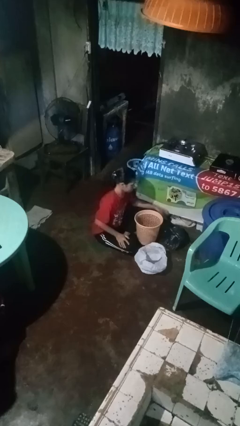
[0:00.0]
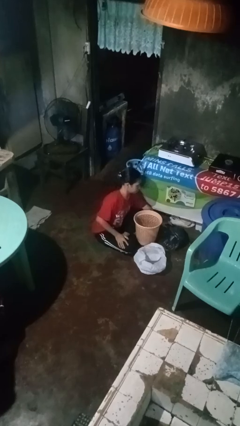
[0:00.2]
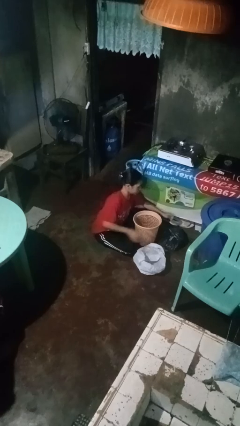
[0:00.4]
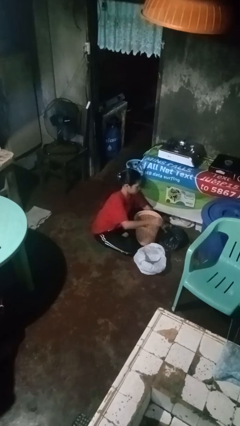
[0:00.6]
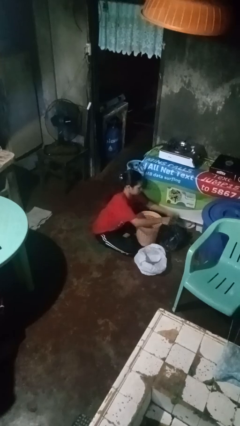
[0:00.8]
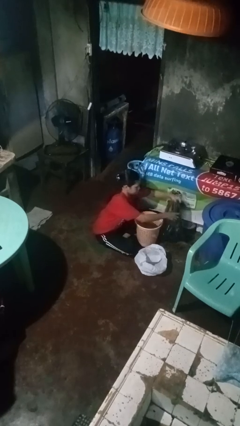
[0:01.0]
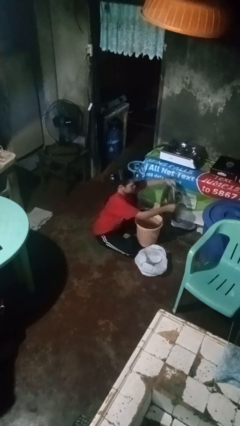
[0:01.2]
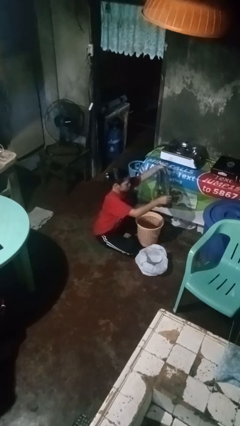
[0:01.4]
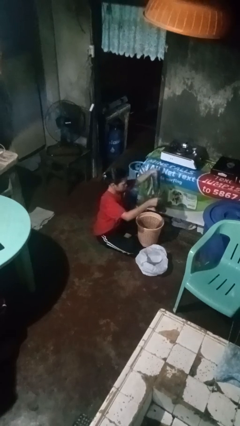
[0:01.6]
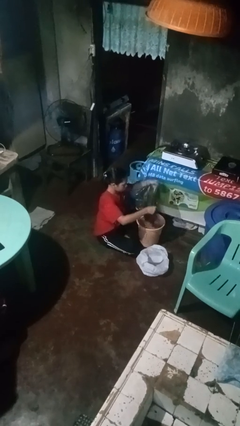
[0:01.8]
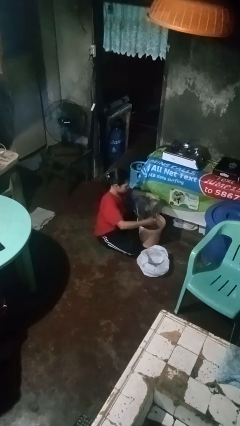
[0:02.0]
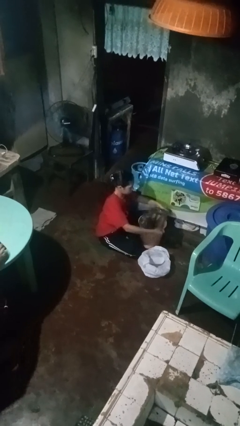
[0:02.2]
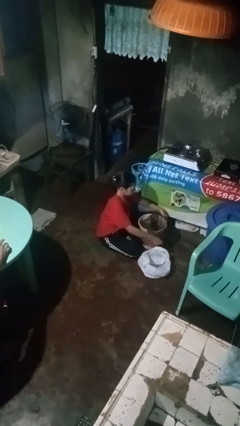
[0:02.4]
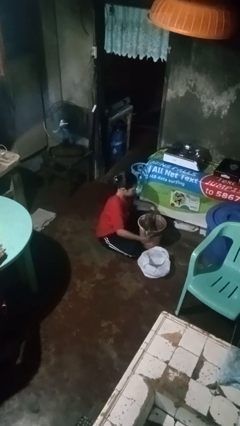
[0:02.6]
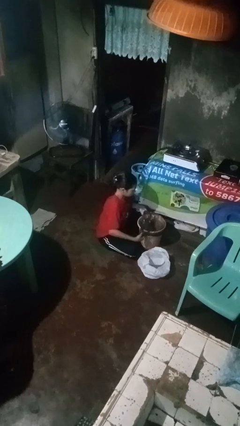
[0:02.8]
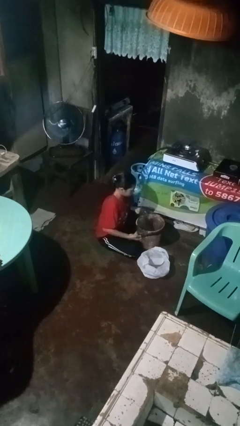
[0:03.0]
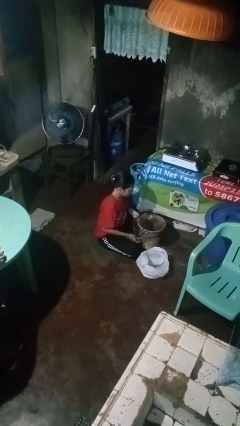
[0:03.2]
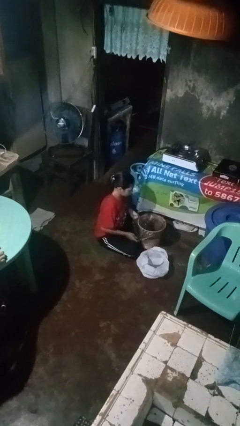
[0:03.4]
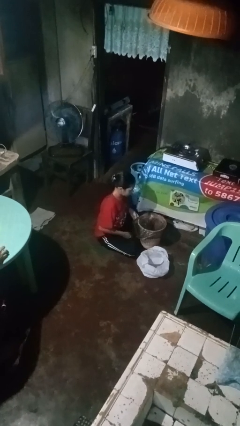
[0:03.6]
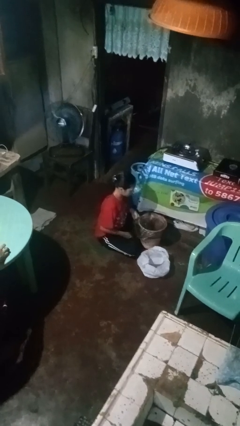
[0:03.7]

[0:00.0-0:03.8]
person inserts trashbag into trashcan

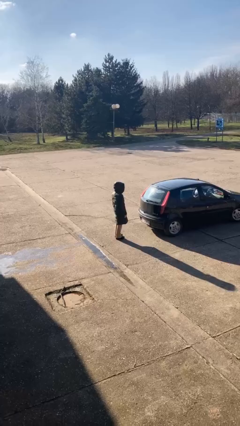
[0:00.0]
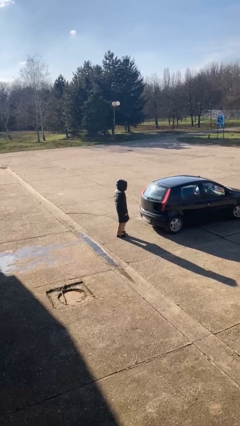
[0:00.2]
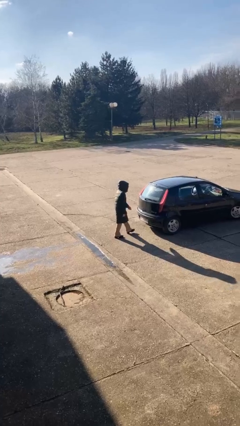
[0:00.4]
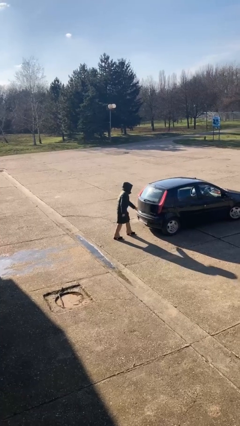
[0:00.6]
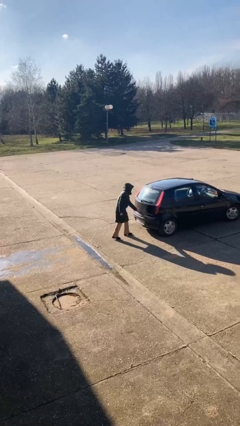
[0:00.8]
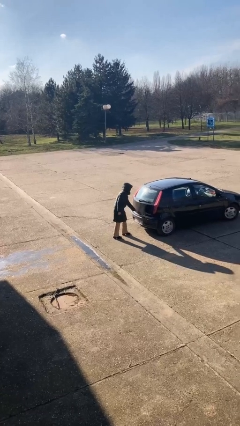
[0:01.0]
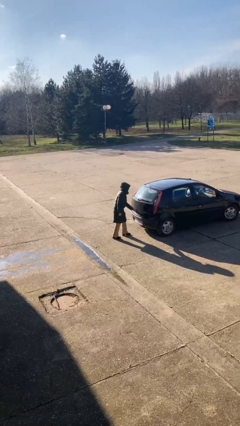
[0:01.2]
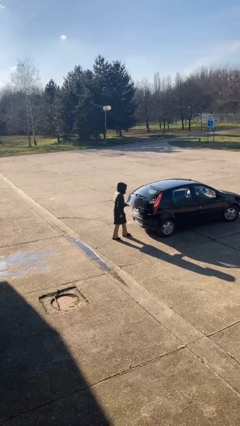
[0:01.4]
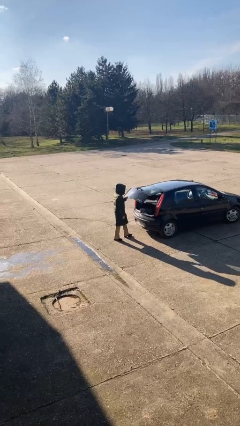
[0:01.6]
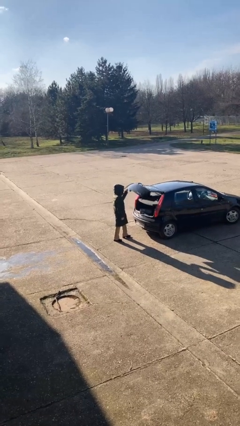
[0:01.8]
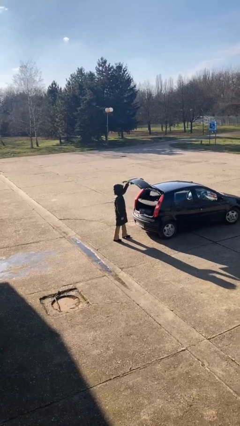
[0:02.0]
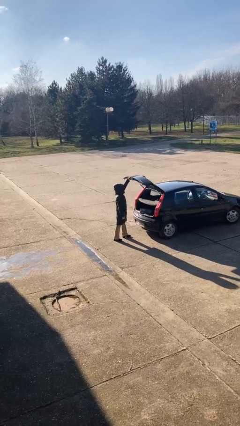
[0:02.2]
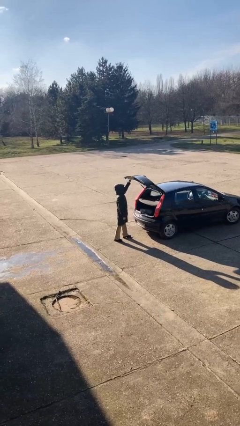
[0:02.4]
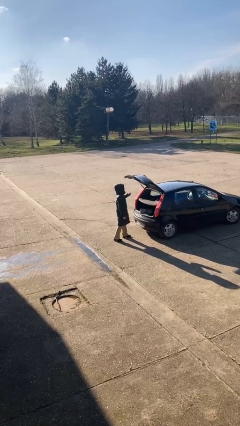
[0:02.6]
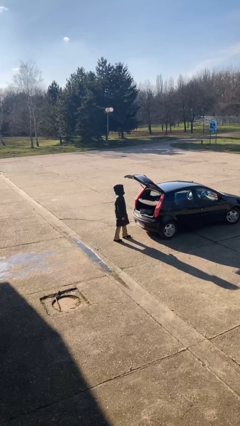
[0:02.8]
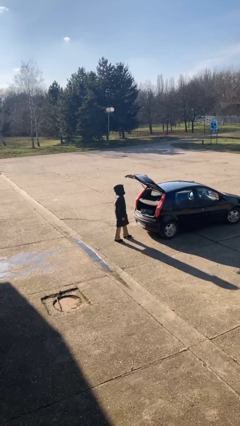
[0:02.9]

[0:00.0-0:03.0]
person opens car trunk

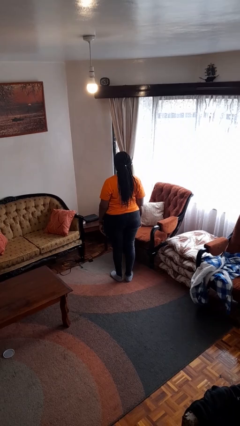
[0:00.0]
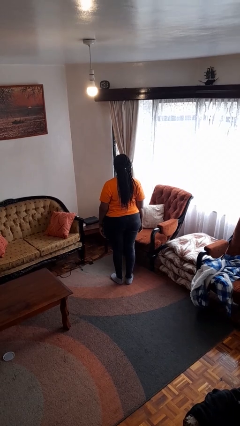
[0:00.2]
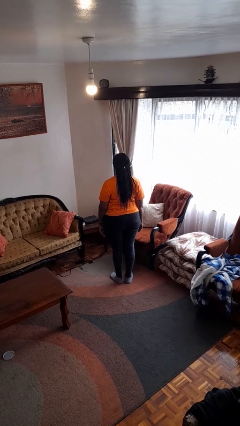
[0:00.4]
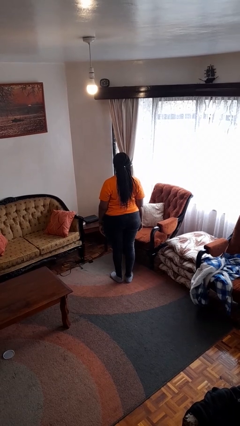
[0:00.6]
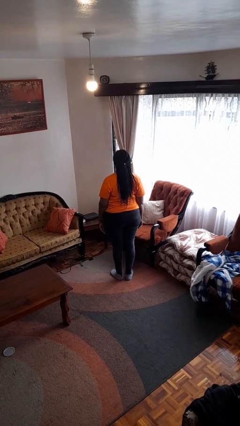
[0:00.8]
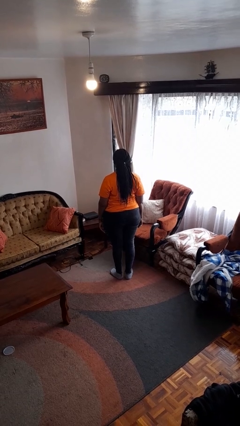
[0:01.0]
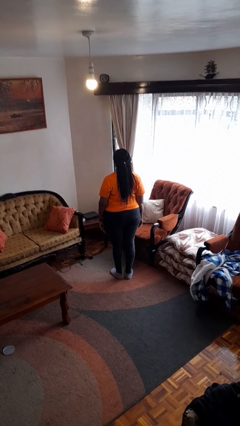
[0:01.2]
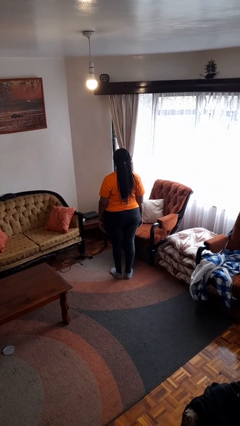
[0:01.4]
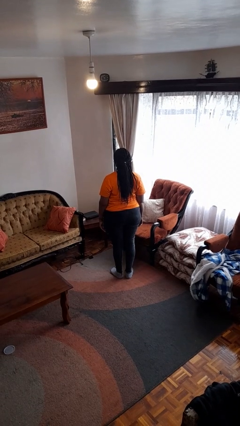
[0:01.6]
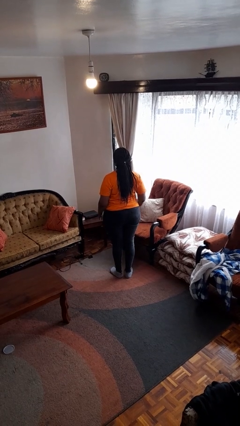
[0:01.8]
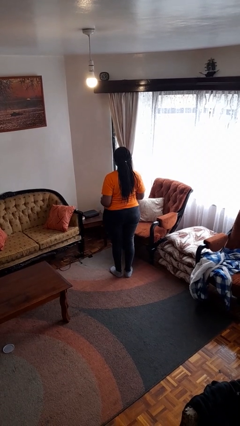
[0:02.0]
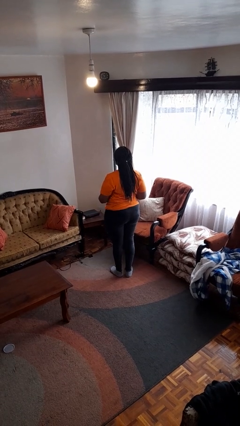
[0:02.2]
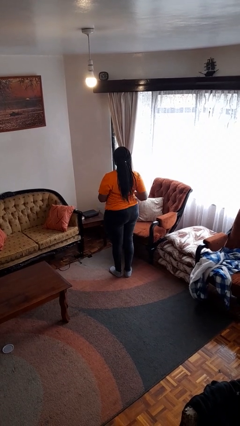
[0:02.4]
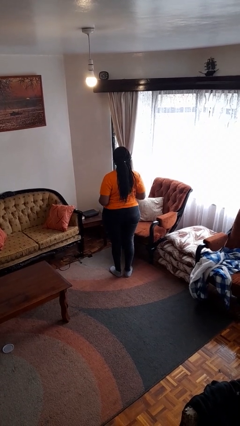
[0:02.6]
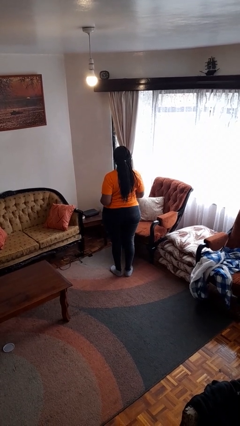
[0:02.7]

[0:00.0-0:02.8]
person wiggles hips

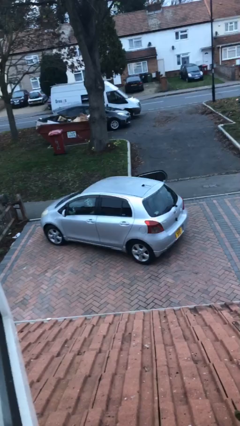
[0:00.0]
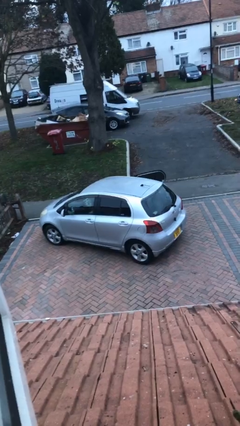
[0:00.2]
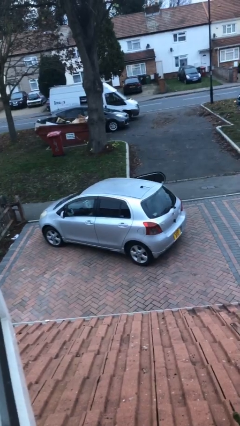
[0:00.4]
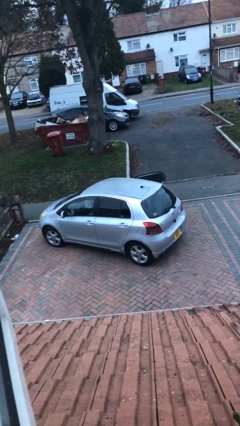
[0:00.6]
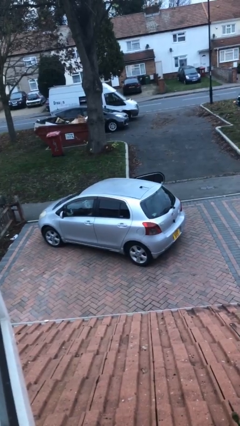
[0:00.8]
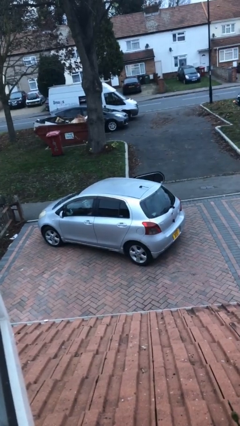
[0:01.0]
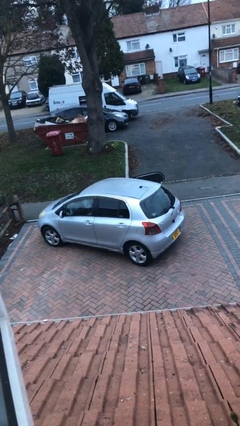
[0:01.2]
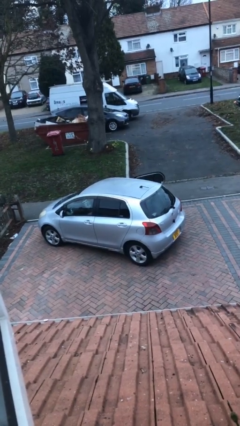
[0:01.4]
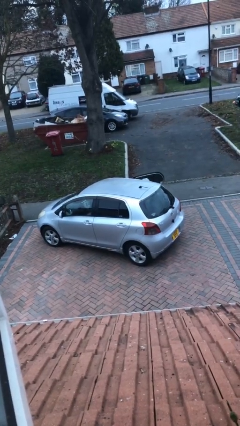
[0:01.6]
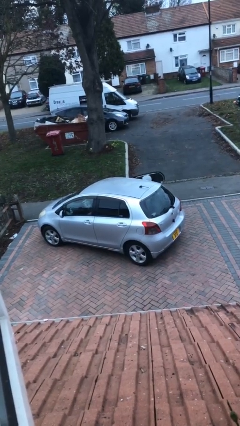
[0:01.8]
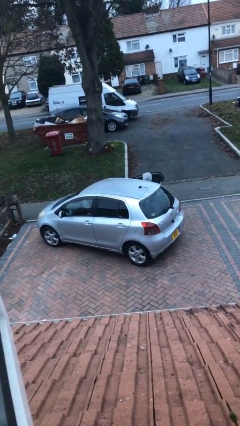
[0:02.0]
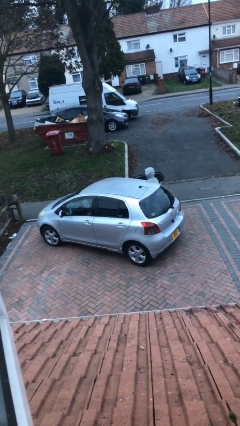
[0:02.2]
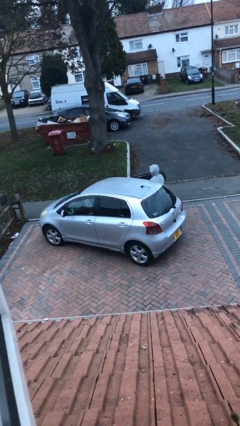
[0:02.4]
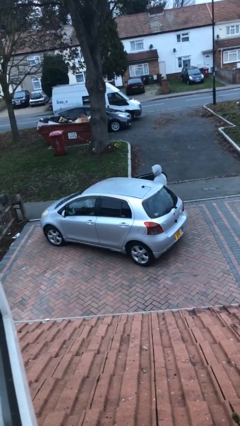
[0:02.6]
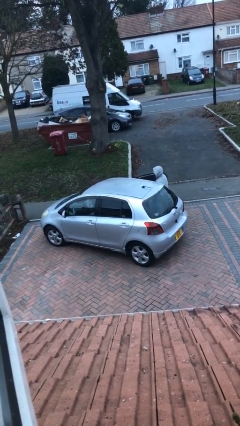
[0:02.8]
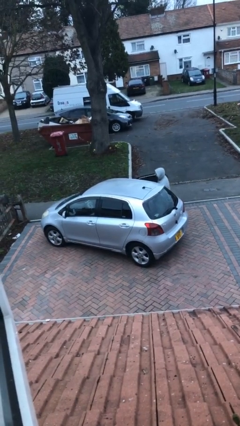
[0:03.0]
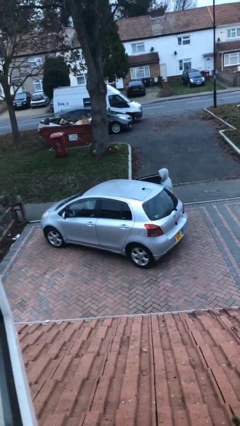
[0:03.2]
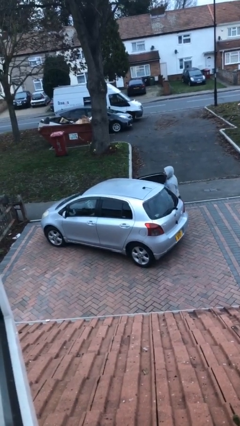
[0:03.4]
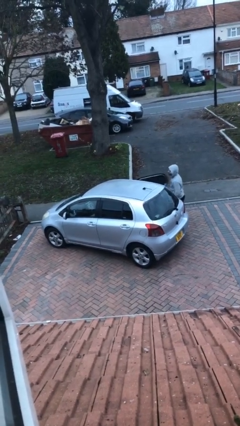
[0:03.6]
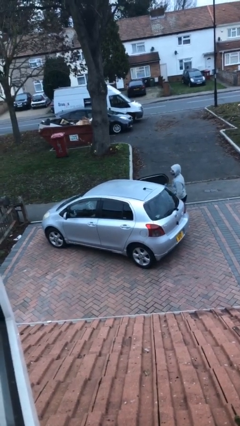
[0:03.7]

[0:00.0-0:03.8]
car drops off person

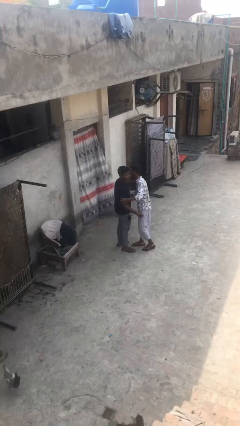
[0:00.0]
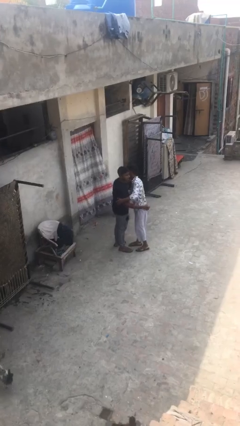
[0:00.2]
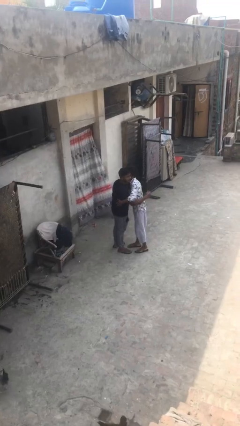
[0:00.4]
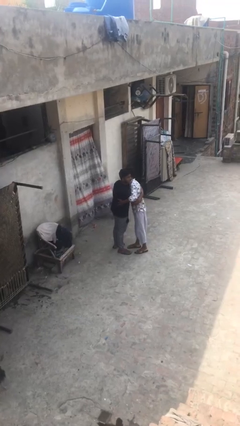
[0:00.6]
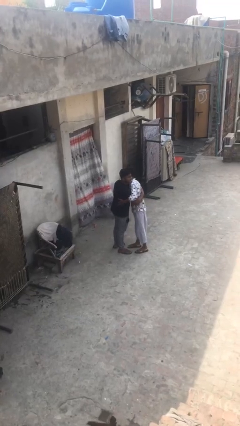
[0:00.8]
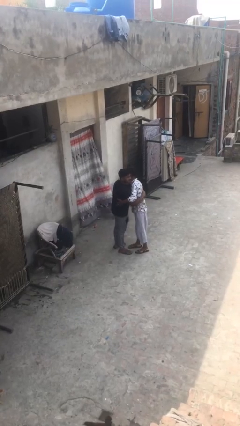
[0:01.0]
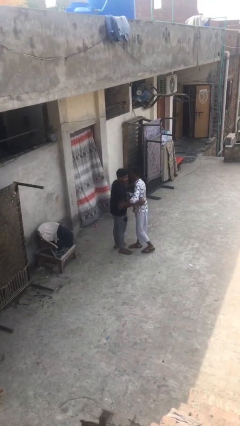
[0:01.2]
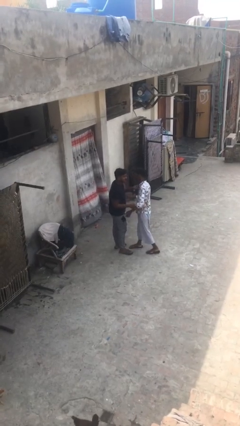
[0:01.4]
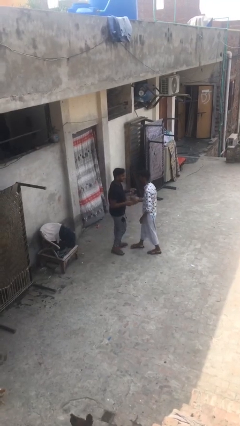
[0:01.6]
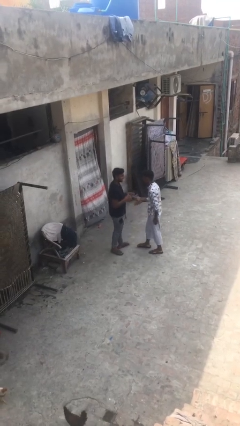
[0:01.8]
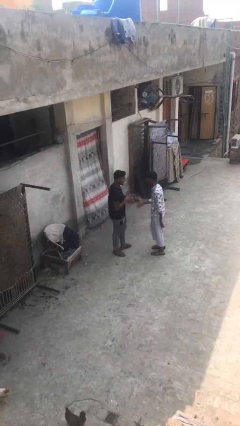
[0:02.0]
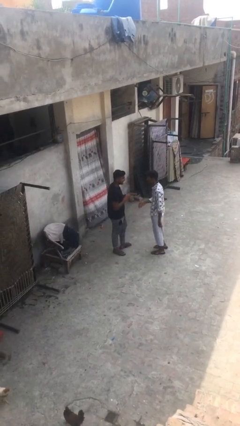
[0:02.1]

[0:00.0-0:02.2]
person embraces person

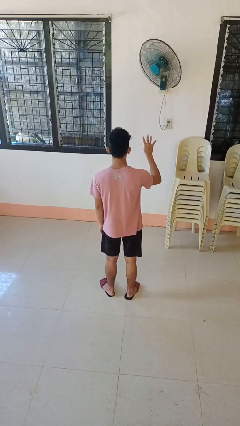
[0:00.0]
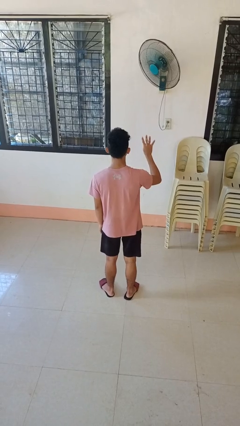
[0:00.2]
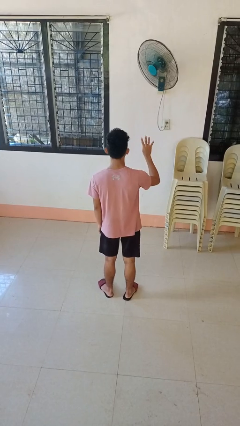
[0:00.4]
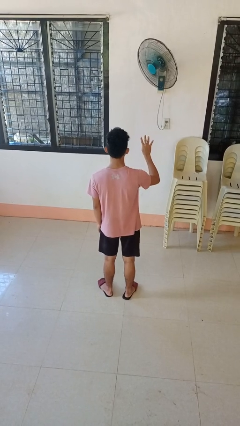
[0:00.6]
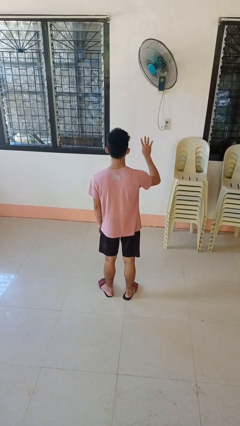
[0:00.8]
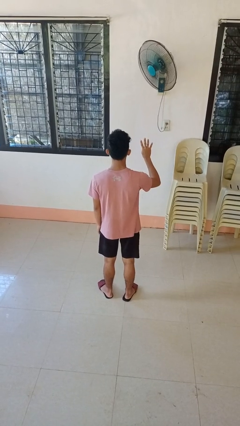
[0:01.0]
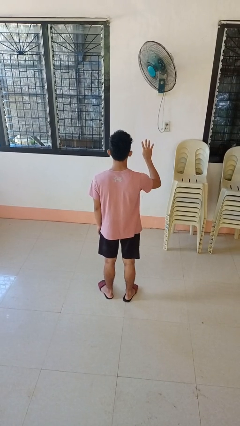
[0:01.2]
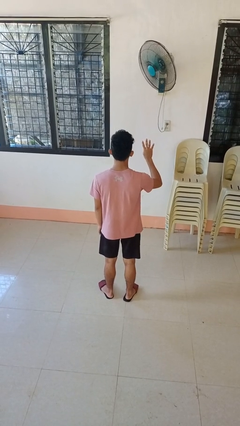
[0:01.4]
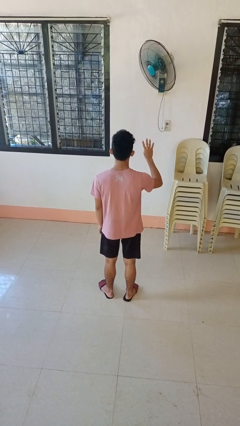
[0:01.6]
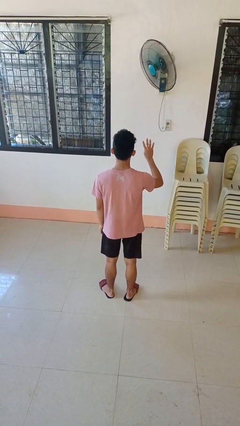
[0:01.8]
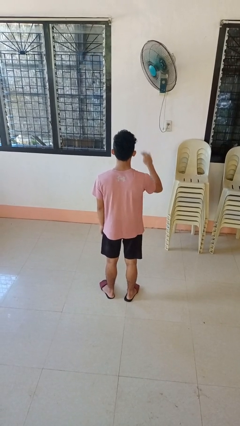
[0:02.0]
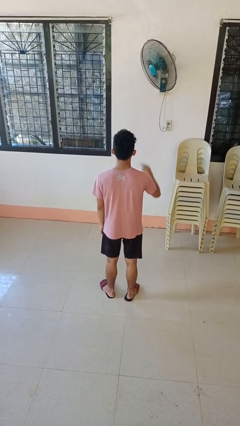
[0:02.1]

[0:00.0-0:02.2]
person gestures number four
